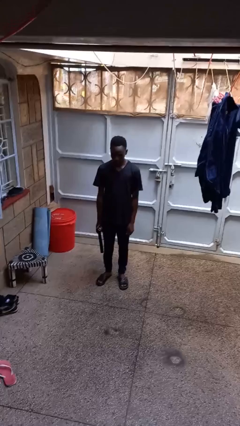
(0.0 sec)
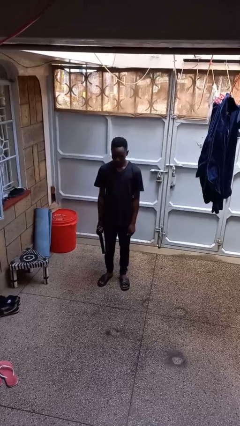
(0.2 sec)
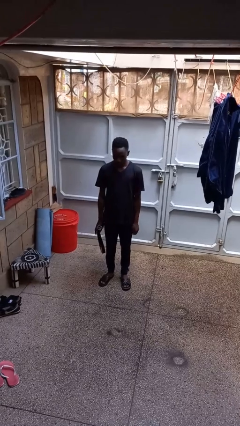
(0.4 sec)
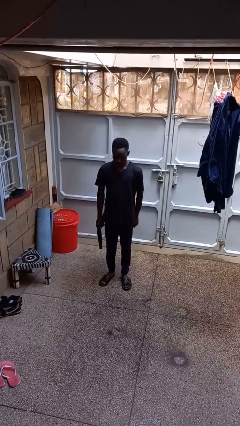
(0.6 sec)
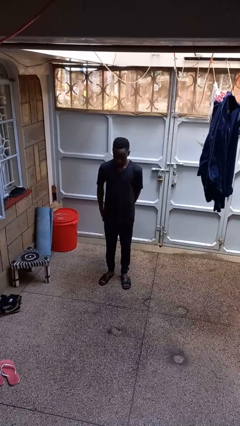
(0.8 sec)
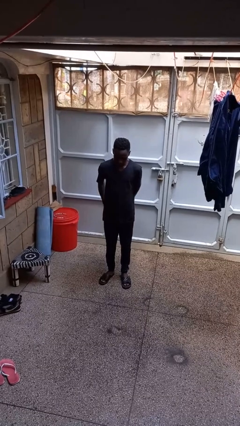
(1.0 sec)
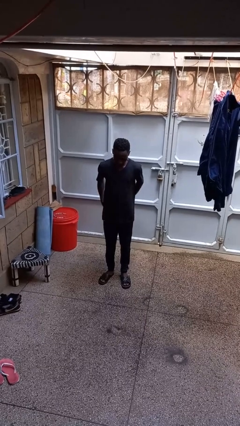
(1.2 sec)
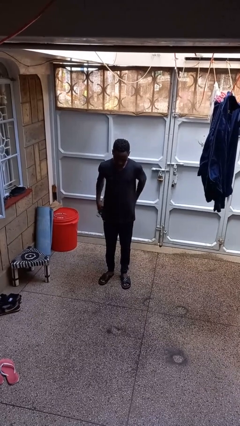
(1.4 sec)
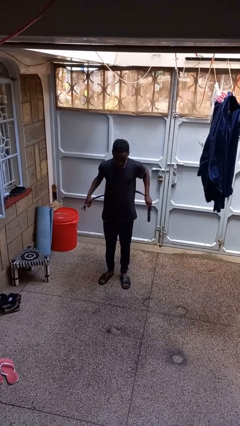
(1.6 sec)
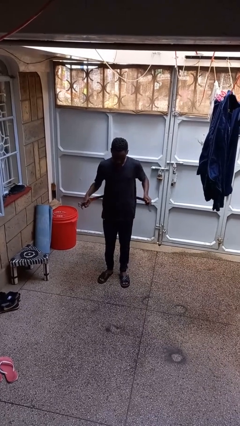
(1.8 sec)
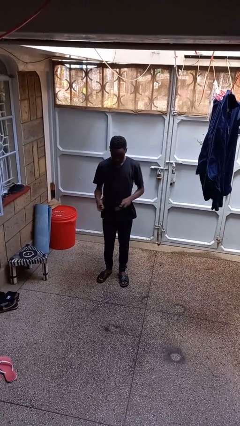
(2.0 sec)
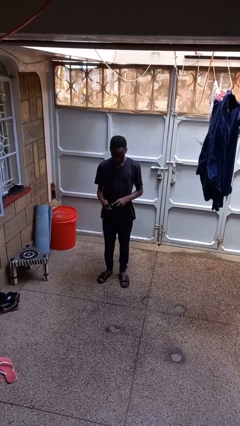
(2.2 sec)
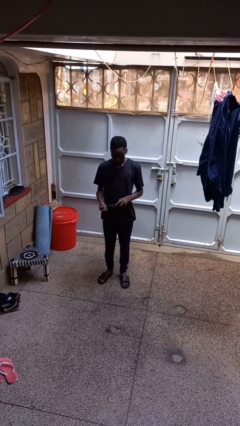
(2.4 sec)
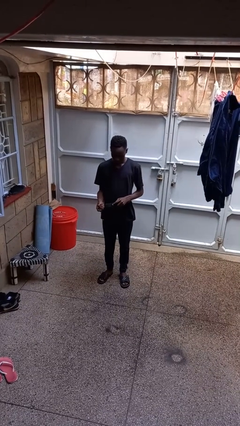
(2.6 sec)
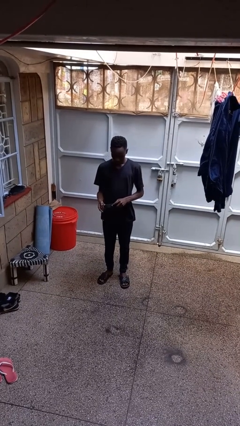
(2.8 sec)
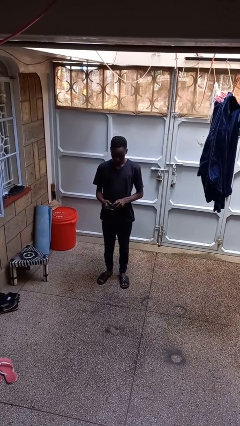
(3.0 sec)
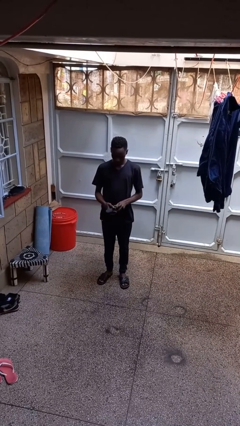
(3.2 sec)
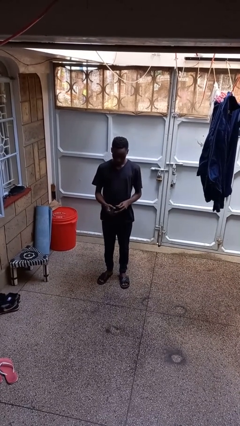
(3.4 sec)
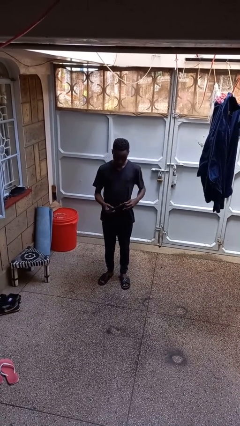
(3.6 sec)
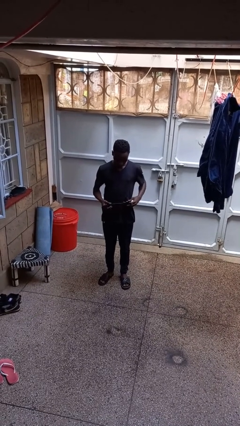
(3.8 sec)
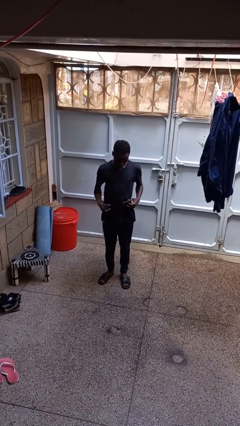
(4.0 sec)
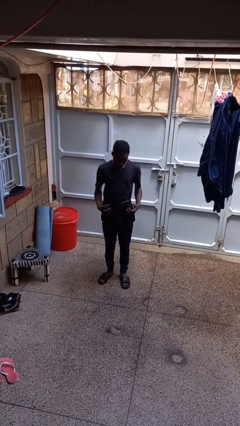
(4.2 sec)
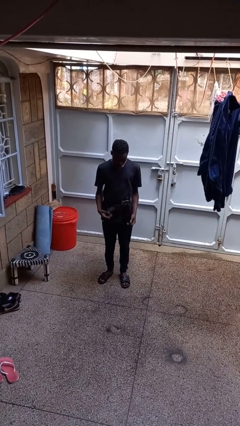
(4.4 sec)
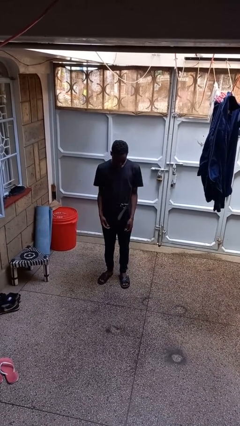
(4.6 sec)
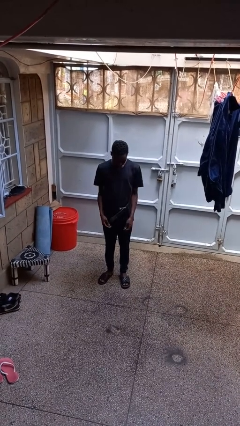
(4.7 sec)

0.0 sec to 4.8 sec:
person puts on belt

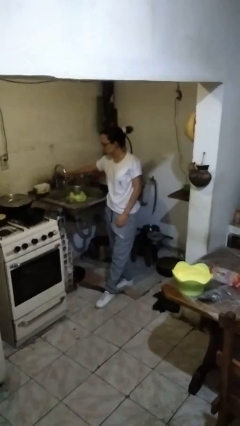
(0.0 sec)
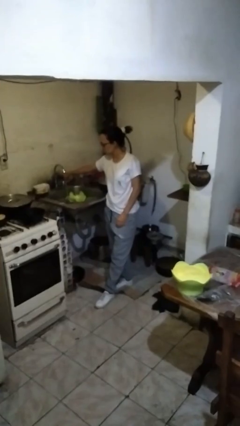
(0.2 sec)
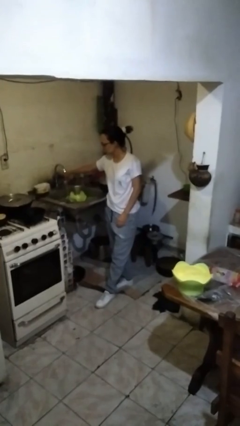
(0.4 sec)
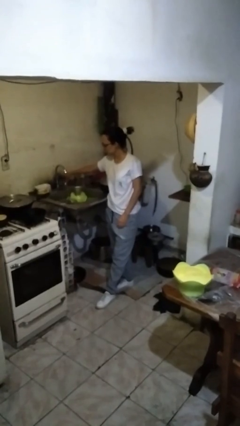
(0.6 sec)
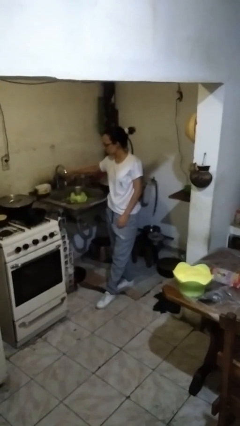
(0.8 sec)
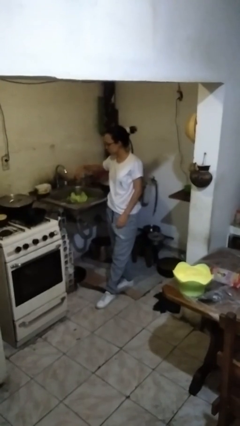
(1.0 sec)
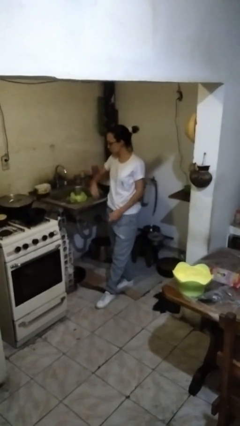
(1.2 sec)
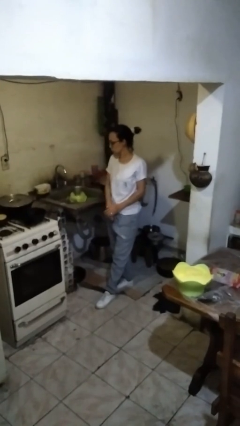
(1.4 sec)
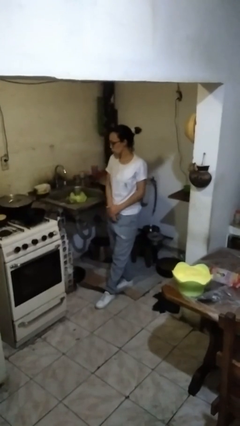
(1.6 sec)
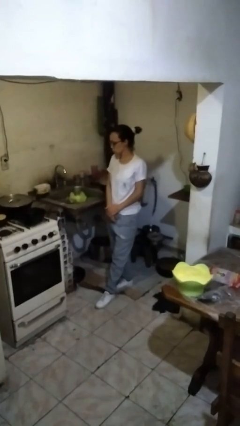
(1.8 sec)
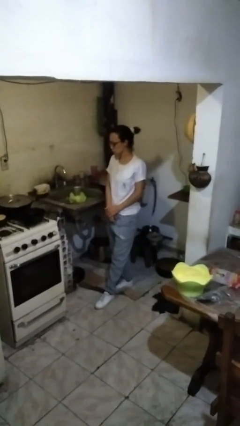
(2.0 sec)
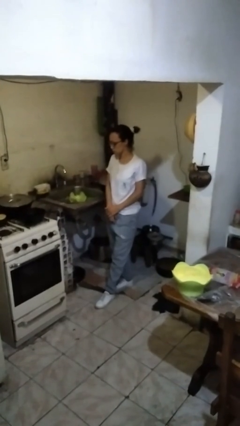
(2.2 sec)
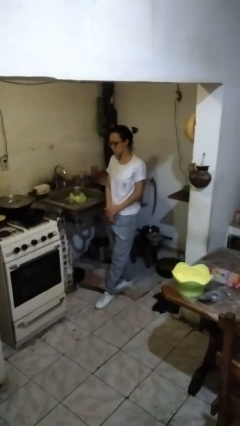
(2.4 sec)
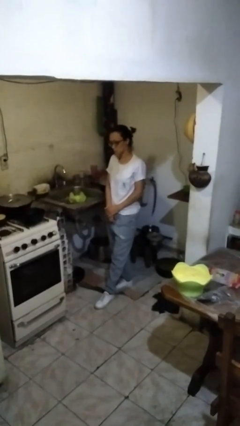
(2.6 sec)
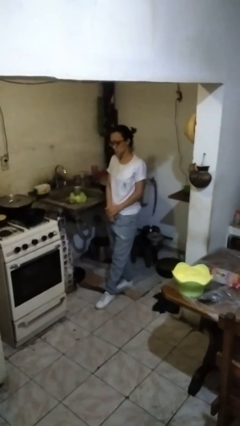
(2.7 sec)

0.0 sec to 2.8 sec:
person turns off faucet

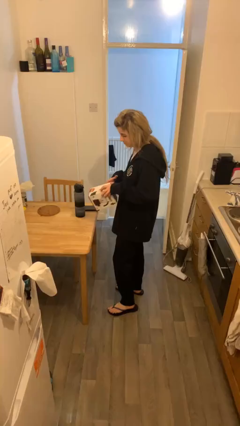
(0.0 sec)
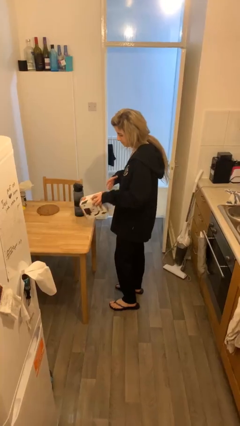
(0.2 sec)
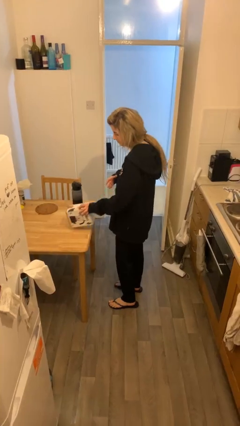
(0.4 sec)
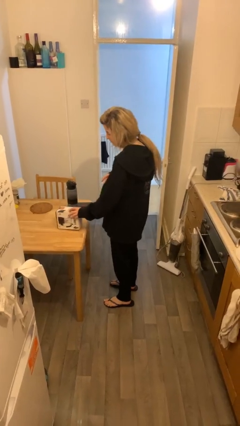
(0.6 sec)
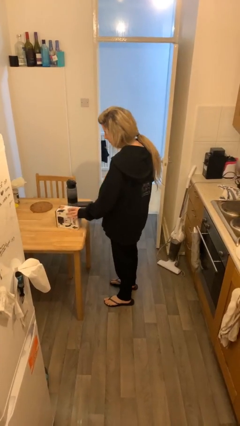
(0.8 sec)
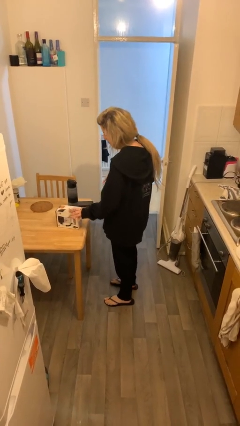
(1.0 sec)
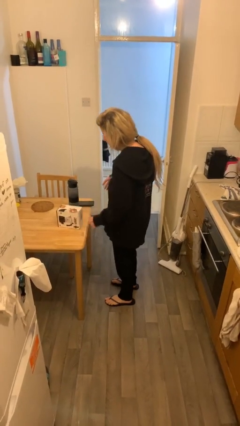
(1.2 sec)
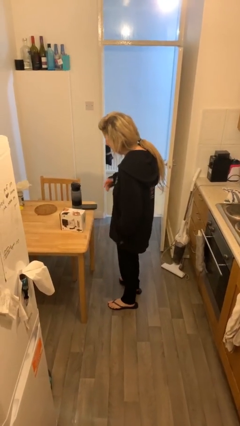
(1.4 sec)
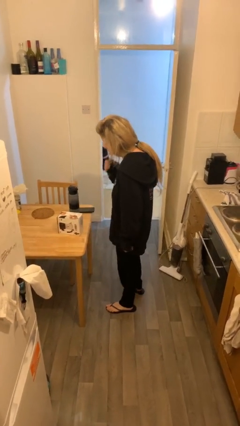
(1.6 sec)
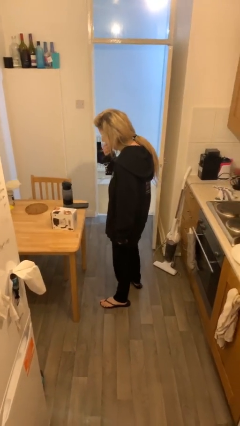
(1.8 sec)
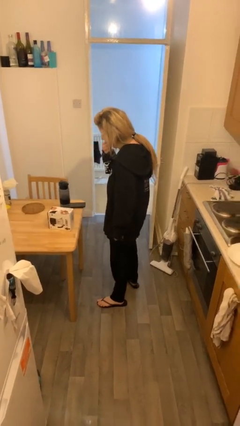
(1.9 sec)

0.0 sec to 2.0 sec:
person puts down object on table

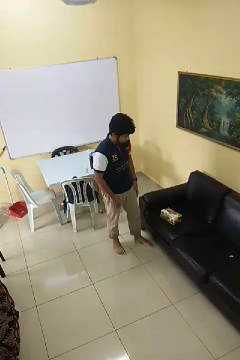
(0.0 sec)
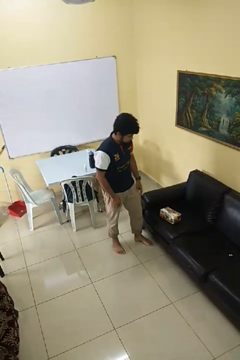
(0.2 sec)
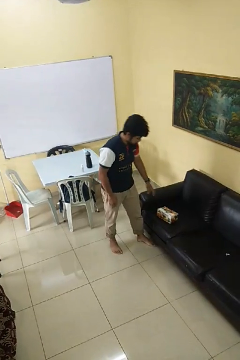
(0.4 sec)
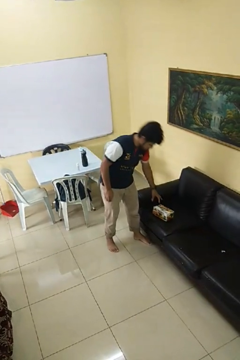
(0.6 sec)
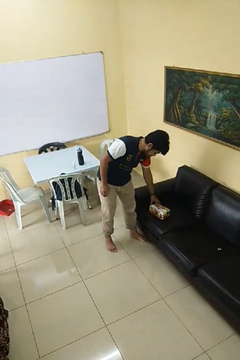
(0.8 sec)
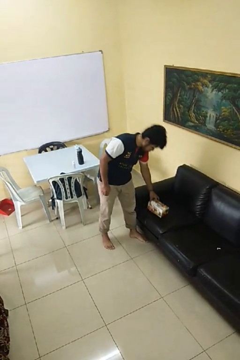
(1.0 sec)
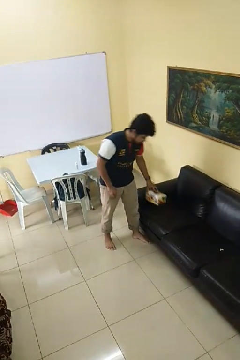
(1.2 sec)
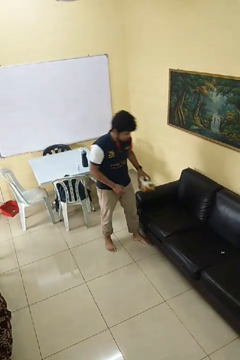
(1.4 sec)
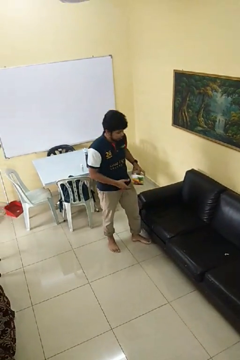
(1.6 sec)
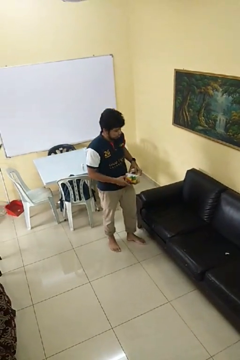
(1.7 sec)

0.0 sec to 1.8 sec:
person picks up object from couch

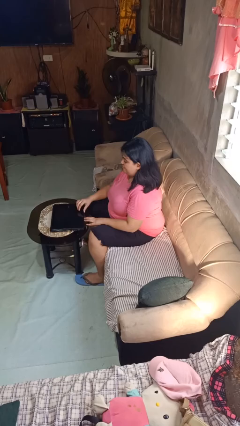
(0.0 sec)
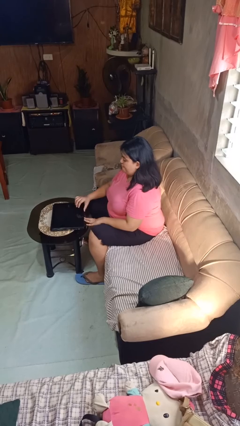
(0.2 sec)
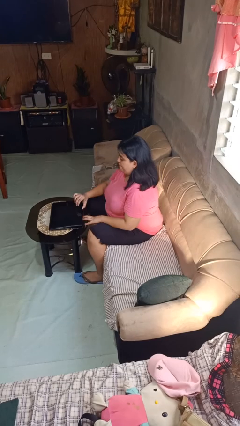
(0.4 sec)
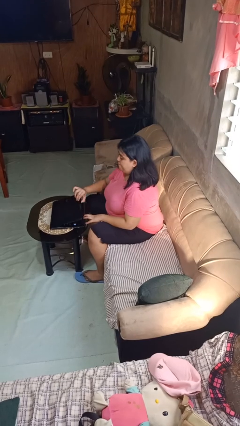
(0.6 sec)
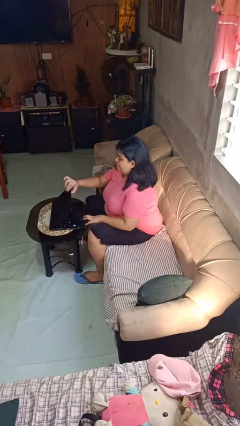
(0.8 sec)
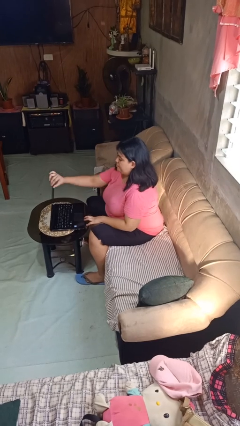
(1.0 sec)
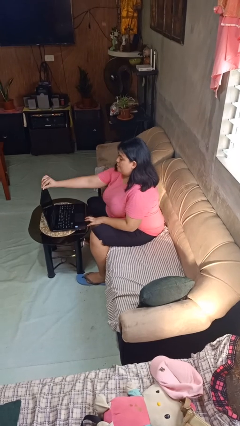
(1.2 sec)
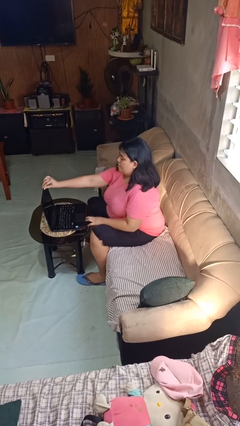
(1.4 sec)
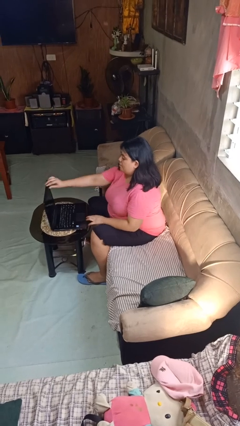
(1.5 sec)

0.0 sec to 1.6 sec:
person opens laptop

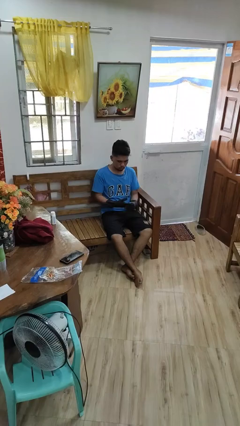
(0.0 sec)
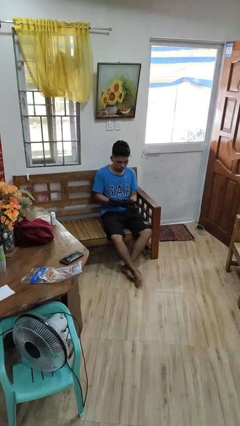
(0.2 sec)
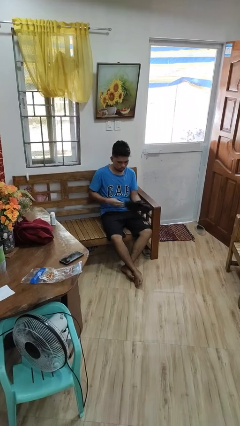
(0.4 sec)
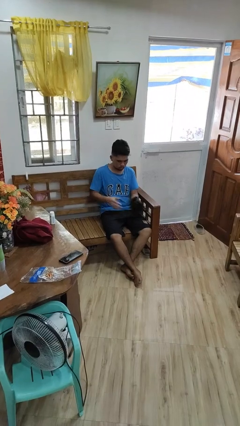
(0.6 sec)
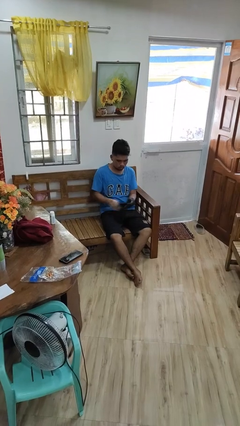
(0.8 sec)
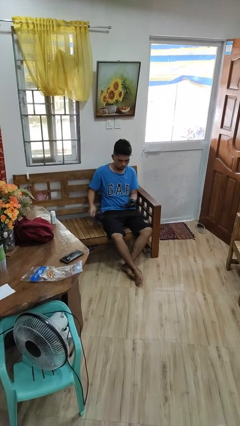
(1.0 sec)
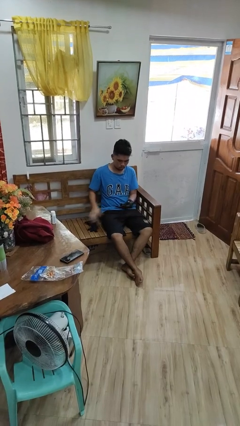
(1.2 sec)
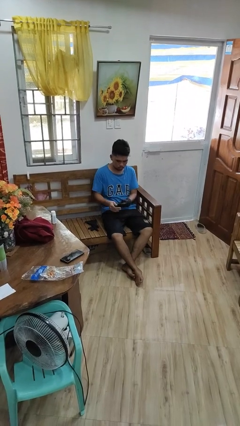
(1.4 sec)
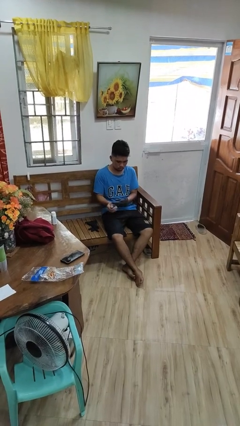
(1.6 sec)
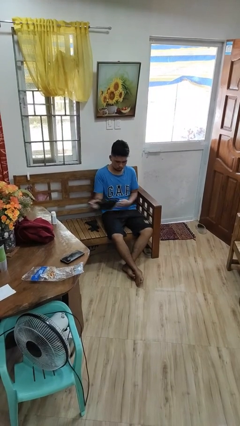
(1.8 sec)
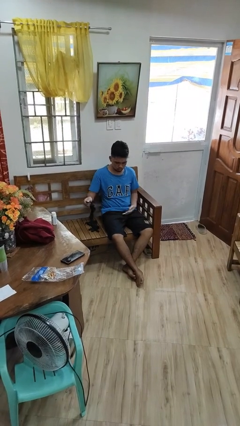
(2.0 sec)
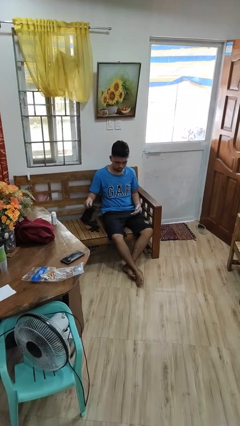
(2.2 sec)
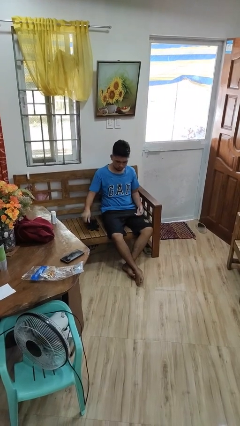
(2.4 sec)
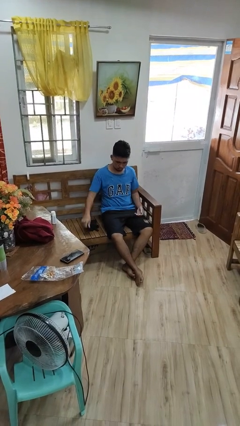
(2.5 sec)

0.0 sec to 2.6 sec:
person takes off gloves

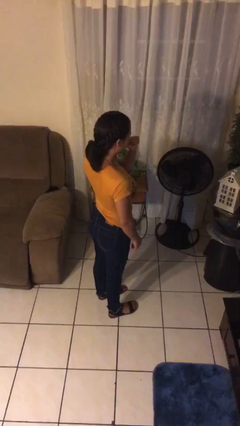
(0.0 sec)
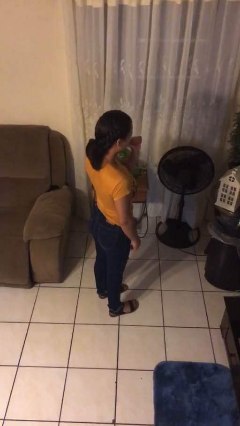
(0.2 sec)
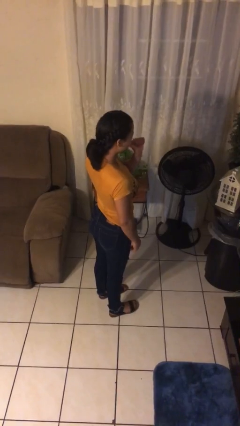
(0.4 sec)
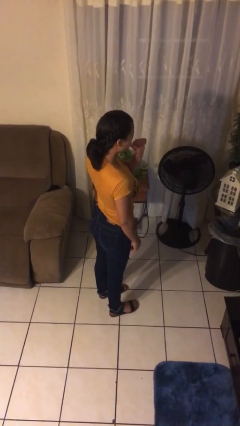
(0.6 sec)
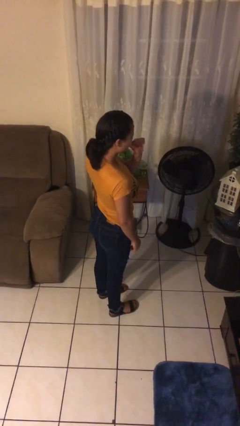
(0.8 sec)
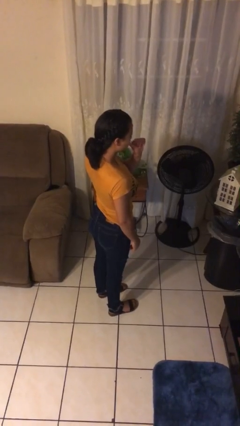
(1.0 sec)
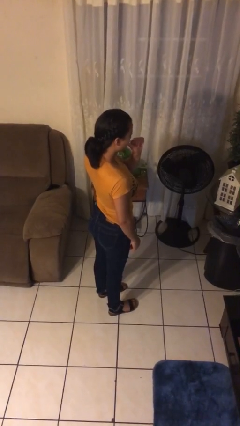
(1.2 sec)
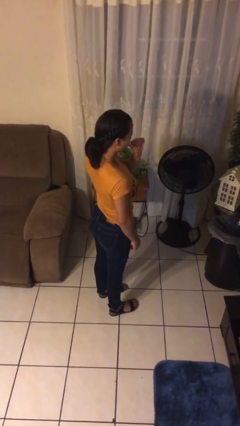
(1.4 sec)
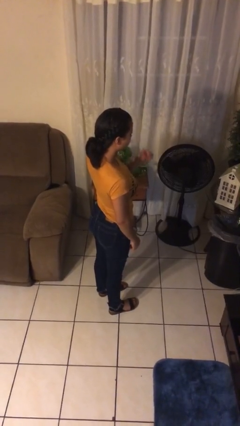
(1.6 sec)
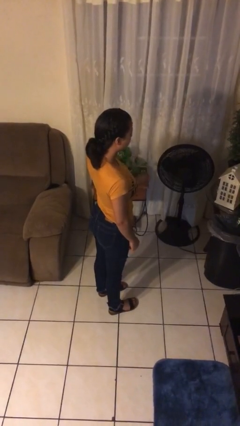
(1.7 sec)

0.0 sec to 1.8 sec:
person licks fingers
